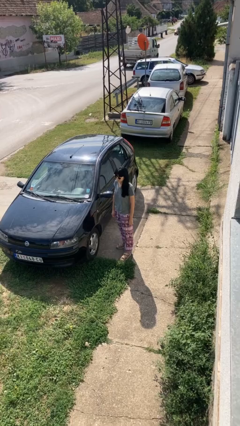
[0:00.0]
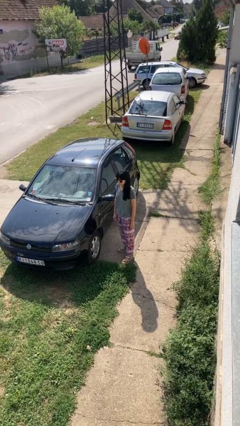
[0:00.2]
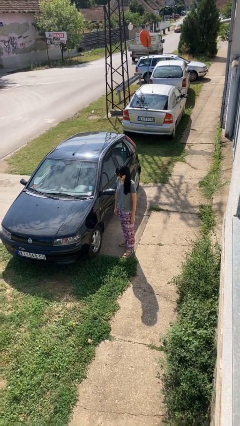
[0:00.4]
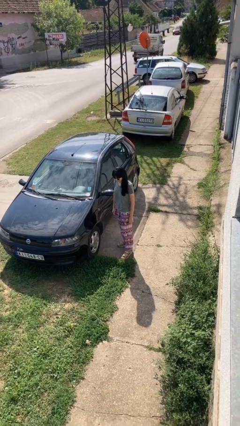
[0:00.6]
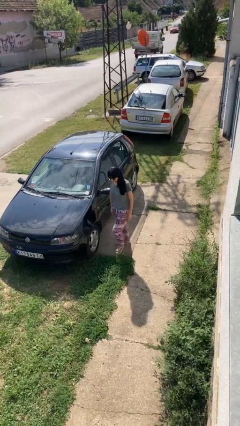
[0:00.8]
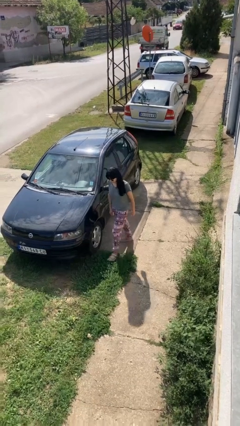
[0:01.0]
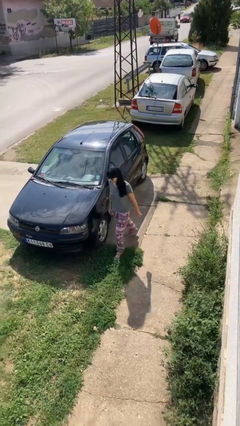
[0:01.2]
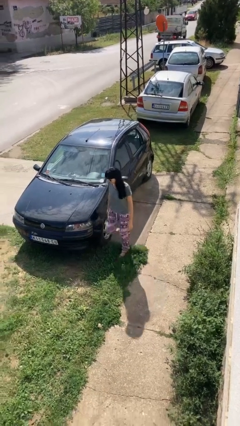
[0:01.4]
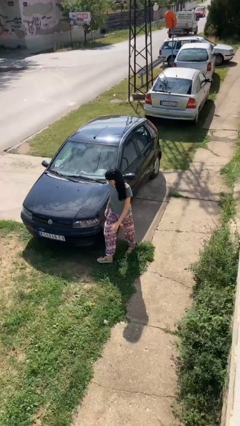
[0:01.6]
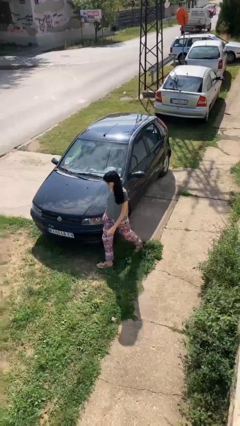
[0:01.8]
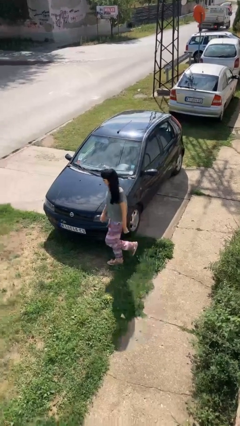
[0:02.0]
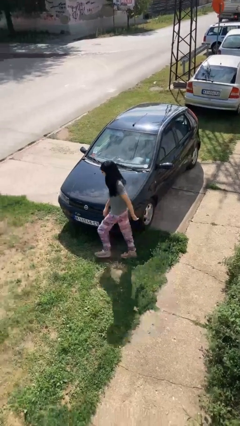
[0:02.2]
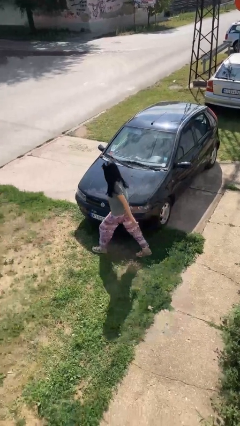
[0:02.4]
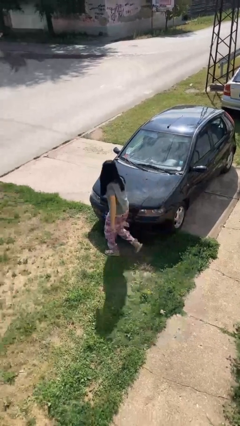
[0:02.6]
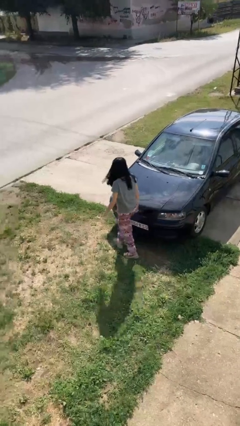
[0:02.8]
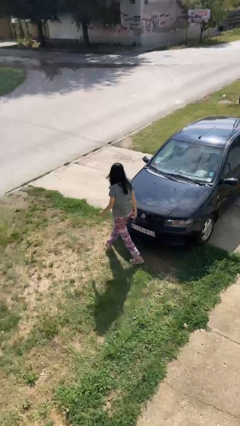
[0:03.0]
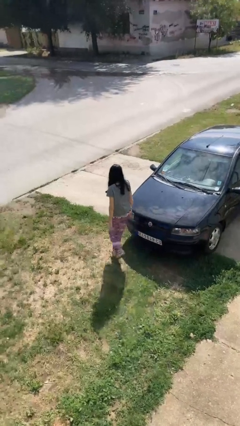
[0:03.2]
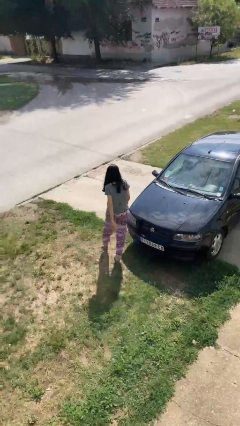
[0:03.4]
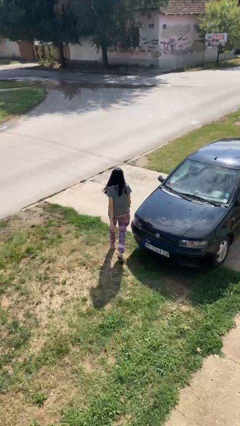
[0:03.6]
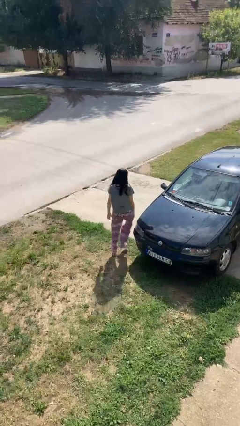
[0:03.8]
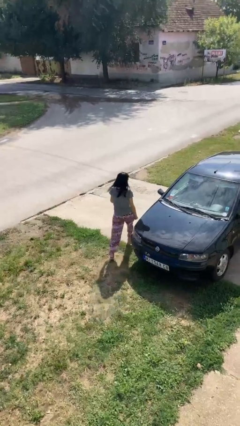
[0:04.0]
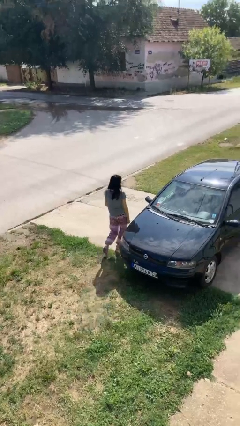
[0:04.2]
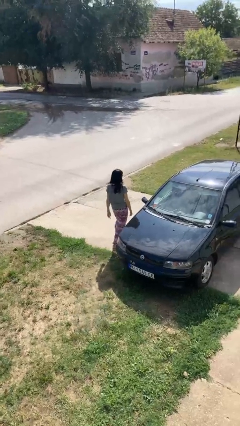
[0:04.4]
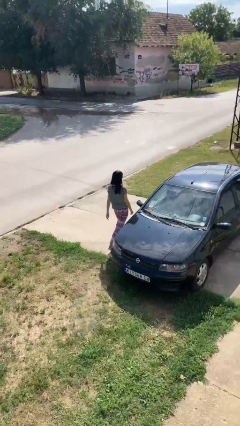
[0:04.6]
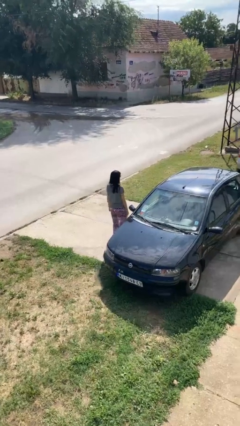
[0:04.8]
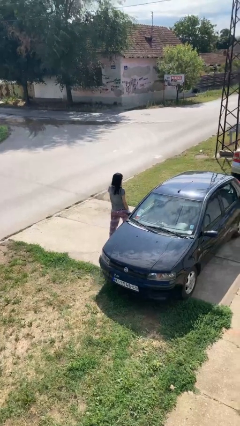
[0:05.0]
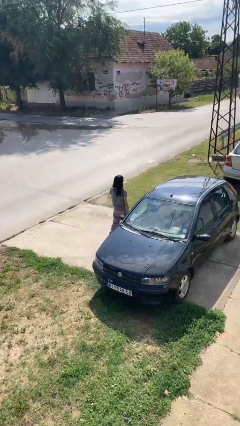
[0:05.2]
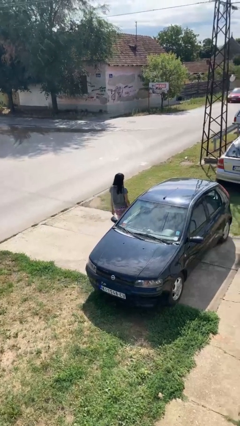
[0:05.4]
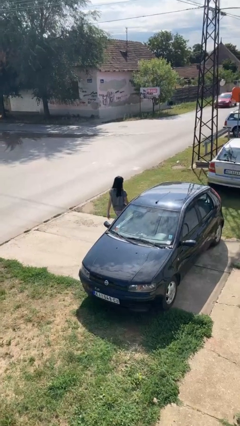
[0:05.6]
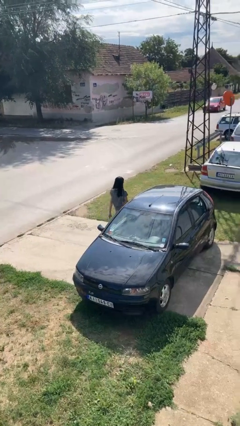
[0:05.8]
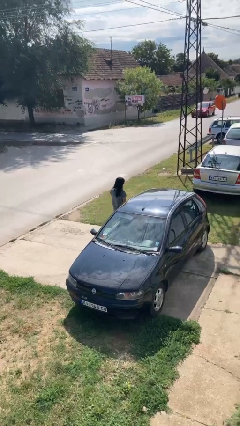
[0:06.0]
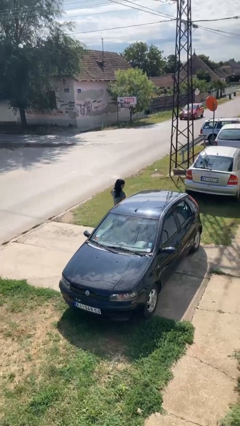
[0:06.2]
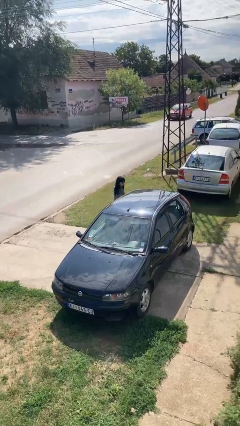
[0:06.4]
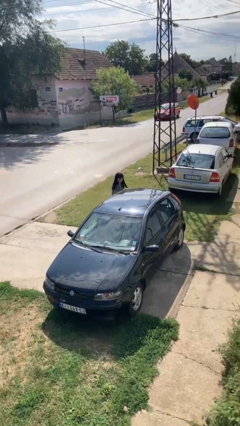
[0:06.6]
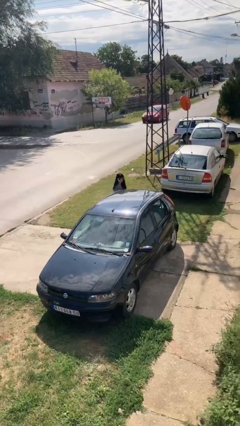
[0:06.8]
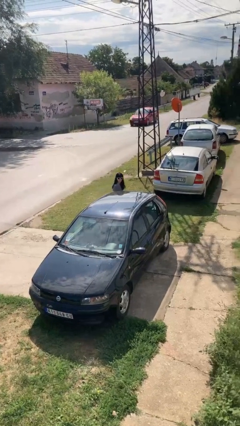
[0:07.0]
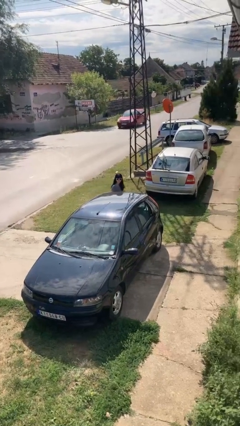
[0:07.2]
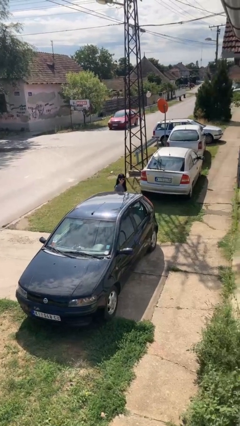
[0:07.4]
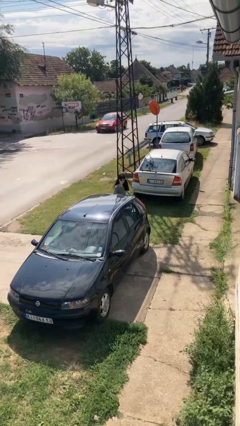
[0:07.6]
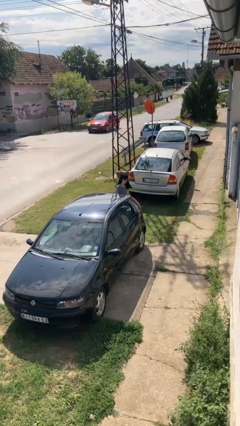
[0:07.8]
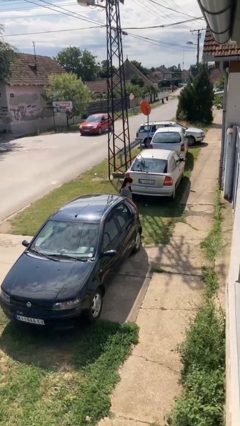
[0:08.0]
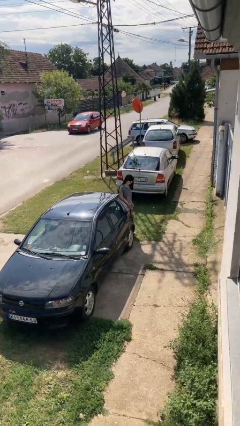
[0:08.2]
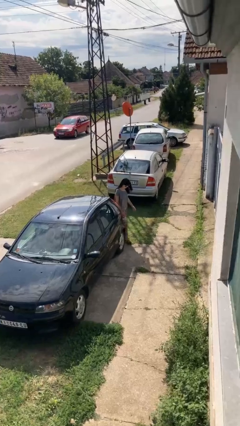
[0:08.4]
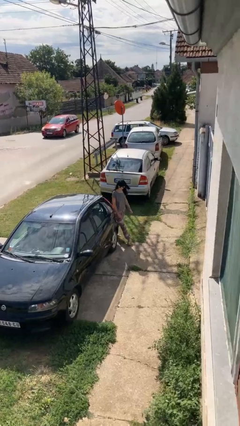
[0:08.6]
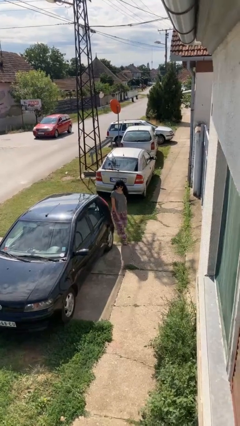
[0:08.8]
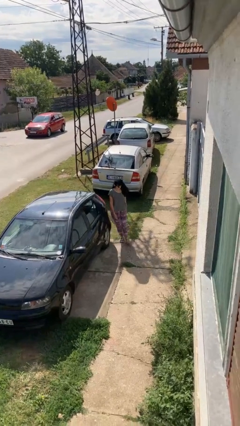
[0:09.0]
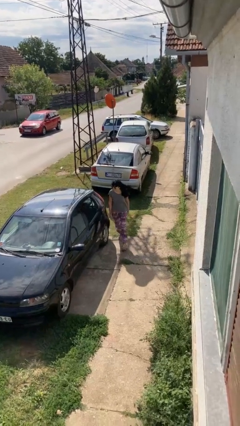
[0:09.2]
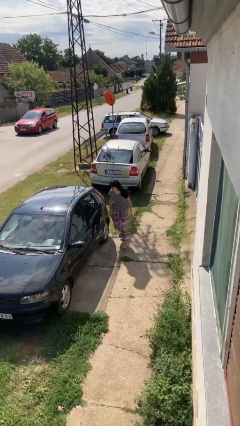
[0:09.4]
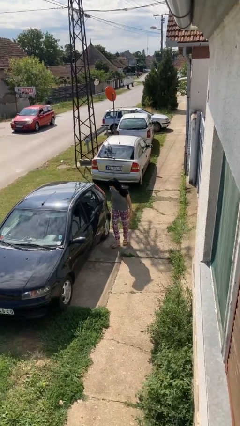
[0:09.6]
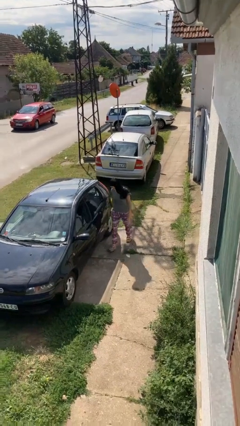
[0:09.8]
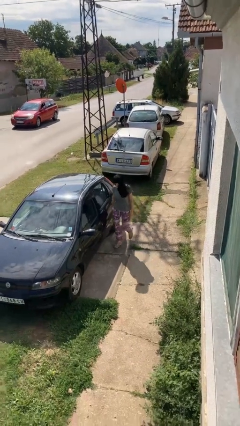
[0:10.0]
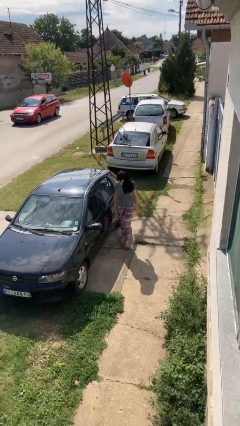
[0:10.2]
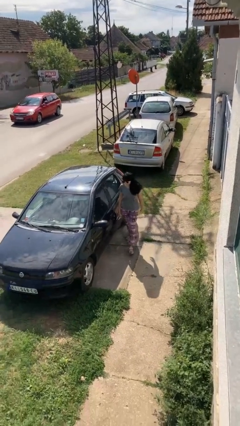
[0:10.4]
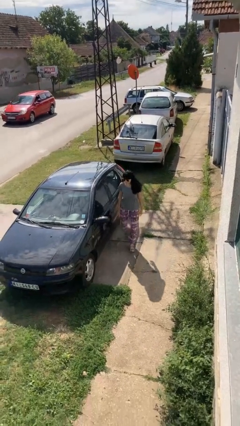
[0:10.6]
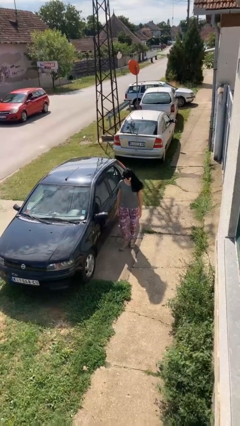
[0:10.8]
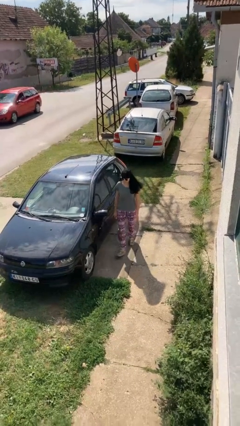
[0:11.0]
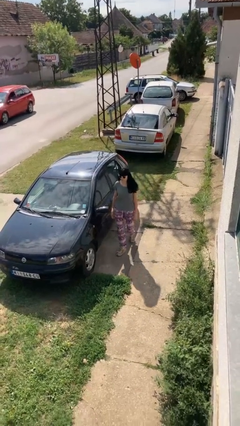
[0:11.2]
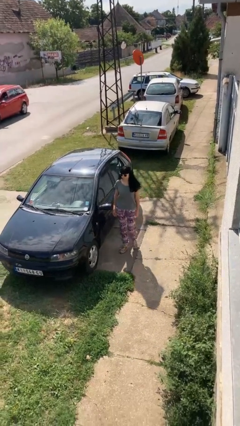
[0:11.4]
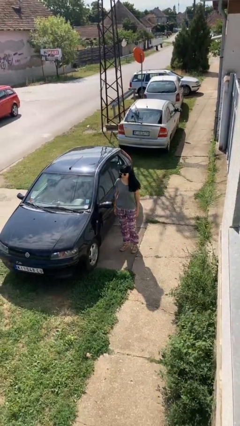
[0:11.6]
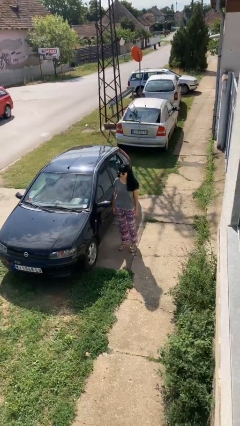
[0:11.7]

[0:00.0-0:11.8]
person walks around car

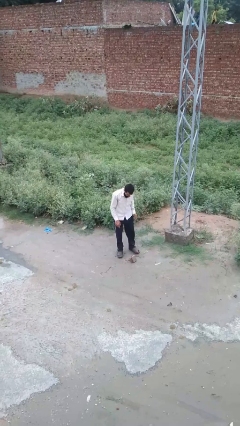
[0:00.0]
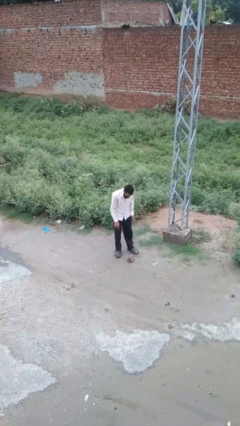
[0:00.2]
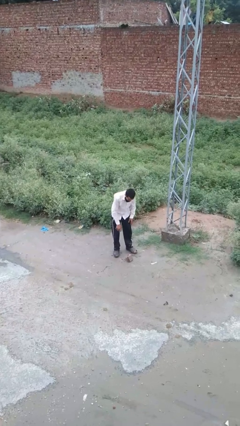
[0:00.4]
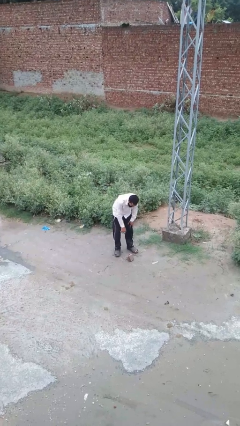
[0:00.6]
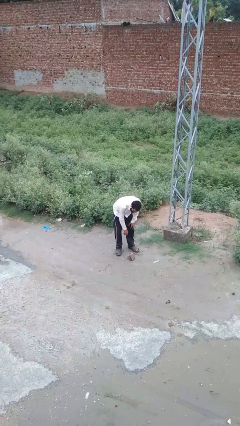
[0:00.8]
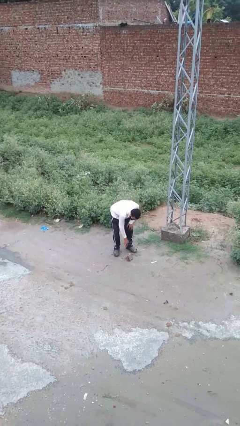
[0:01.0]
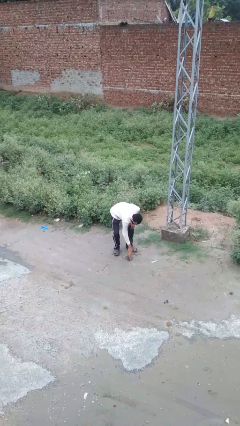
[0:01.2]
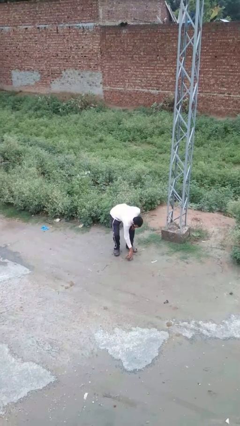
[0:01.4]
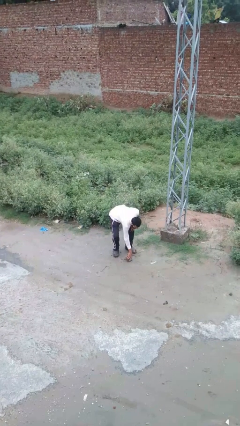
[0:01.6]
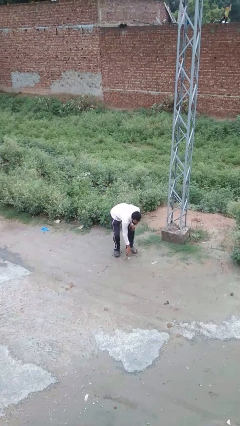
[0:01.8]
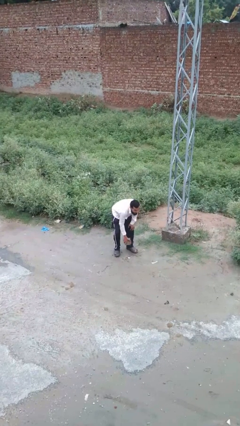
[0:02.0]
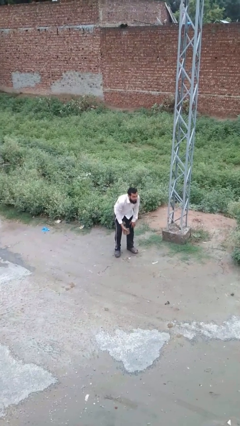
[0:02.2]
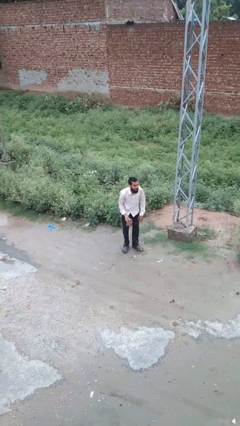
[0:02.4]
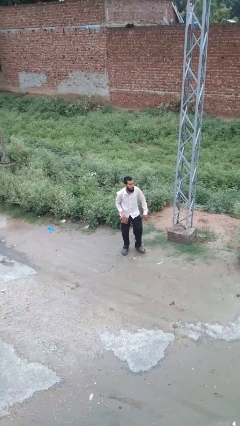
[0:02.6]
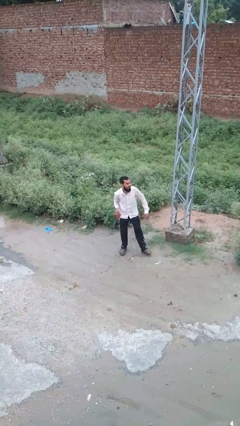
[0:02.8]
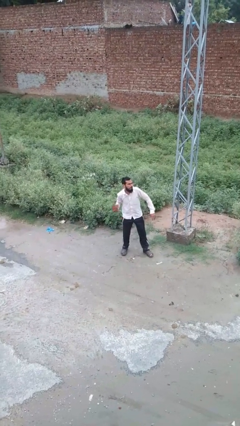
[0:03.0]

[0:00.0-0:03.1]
person picks up object from floor

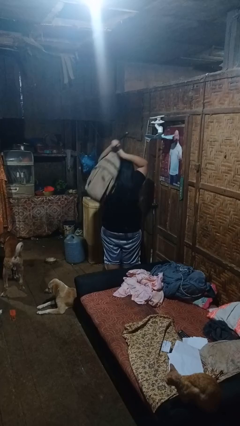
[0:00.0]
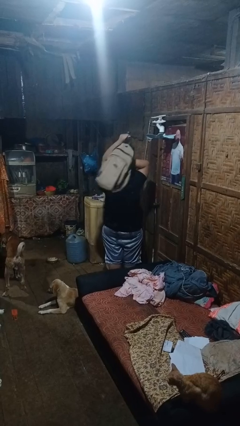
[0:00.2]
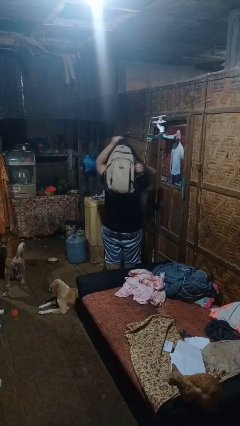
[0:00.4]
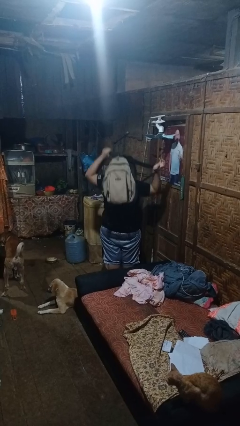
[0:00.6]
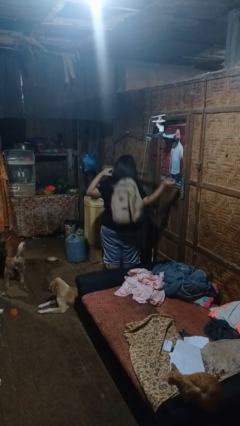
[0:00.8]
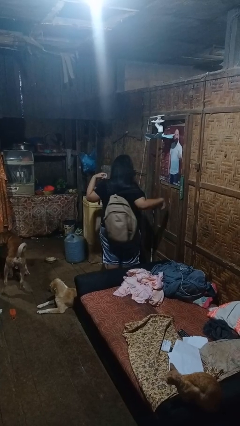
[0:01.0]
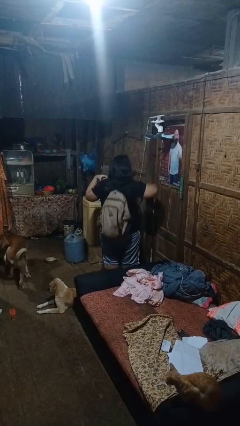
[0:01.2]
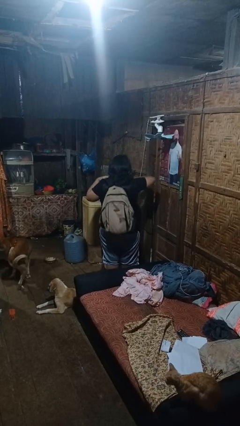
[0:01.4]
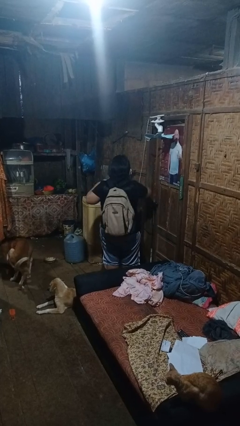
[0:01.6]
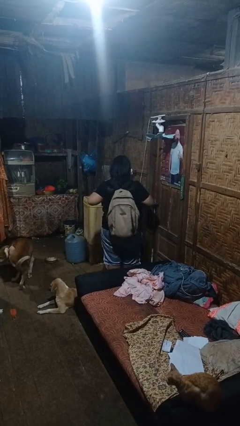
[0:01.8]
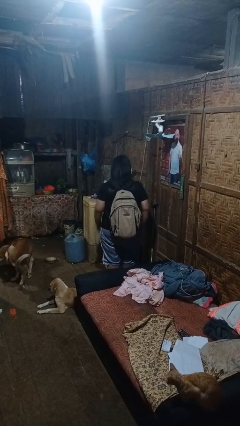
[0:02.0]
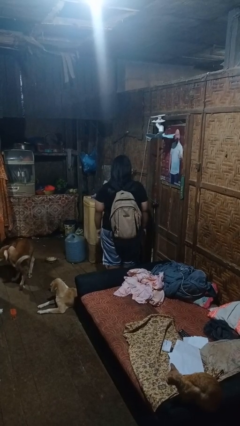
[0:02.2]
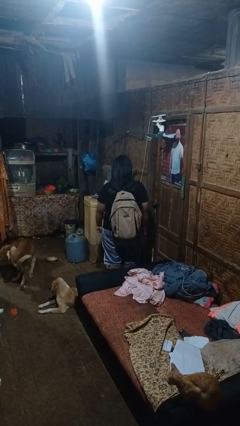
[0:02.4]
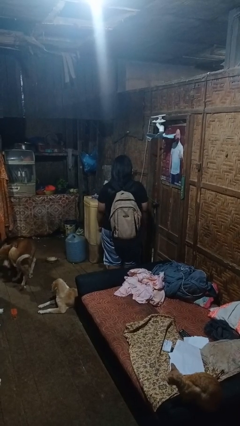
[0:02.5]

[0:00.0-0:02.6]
person puts on backpack

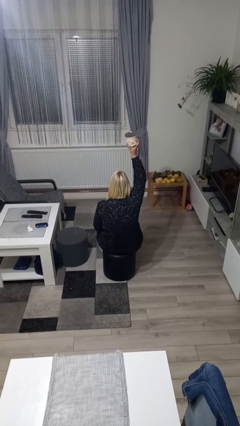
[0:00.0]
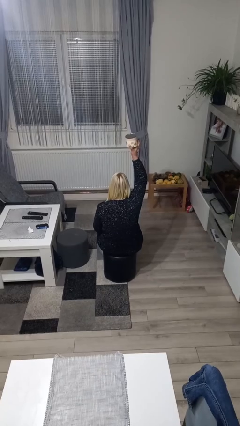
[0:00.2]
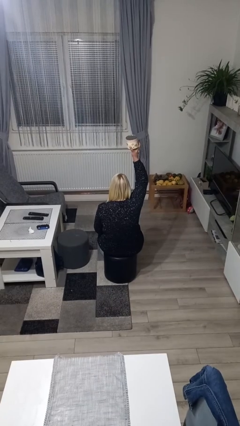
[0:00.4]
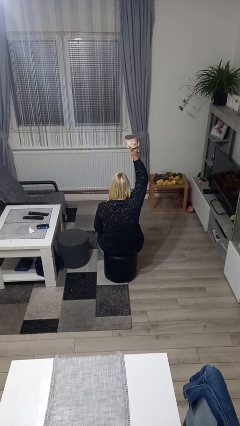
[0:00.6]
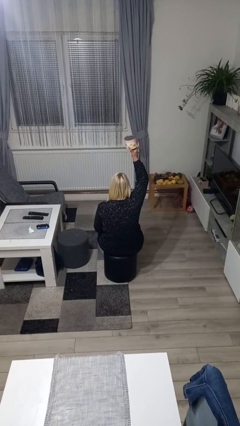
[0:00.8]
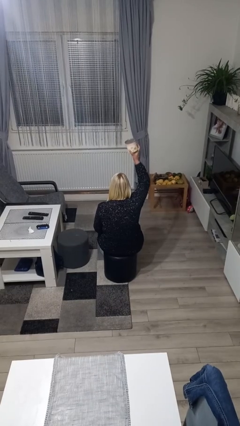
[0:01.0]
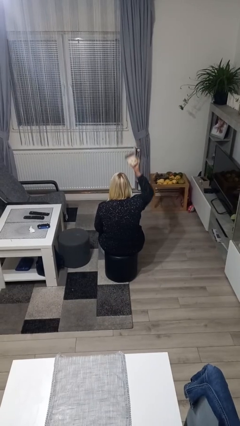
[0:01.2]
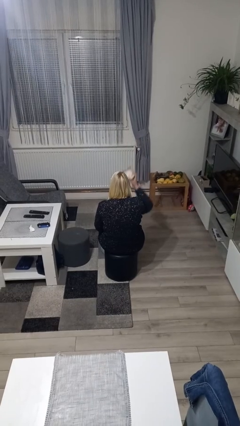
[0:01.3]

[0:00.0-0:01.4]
person holds object above head
